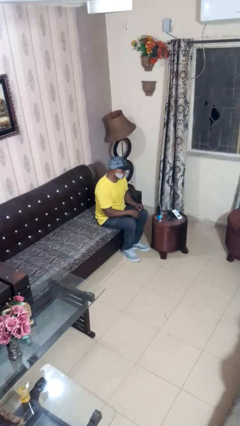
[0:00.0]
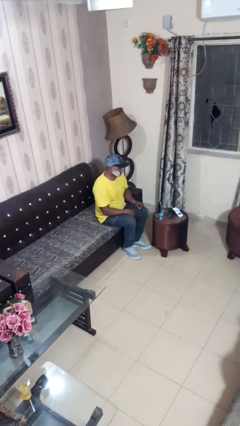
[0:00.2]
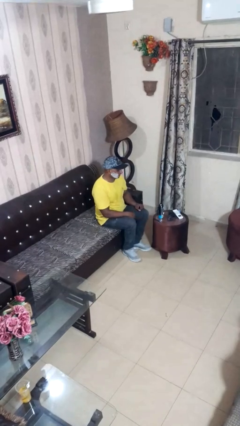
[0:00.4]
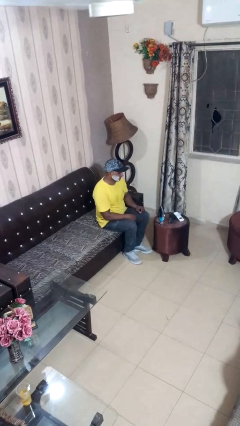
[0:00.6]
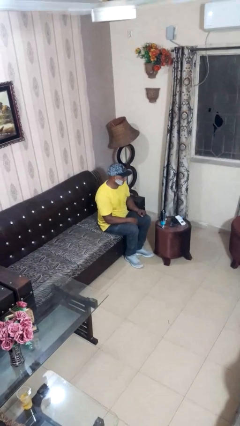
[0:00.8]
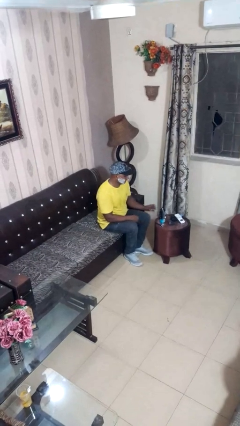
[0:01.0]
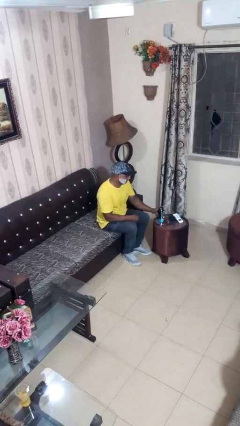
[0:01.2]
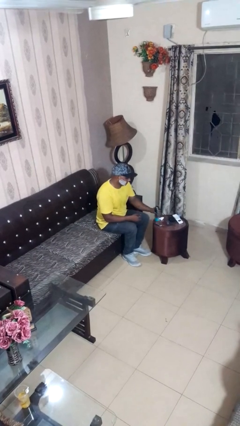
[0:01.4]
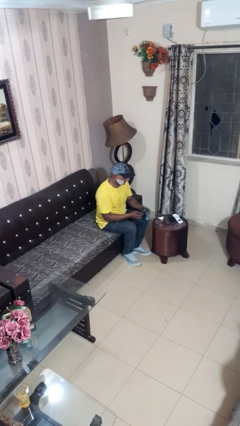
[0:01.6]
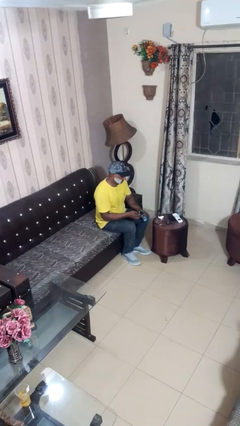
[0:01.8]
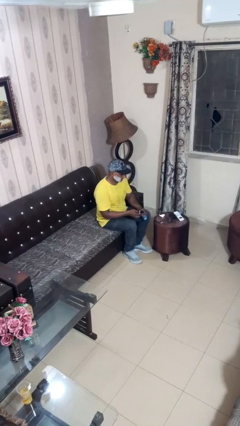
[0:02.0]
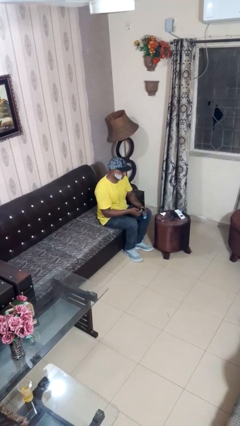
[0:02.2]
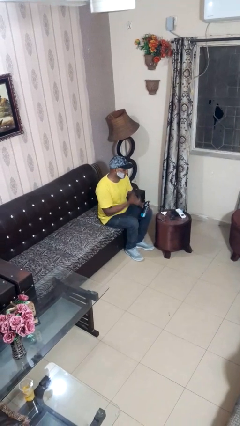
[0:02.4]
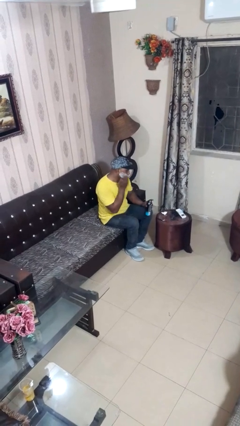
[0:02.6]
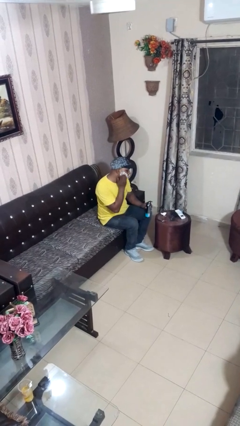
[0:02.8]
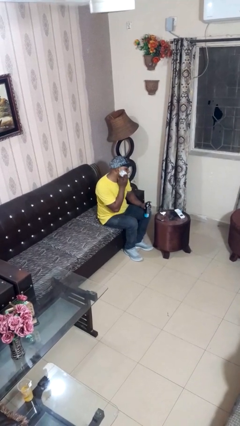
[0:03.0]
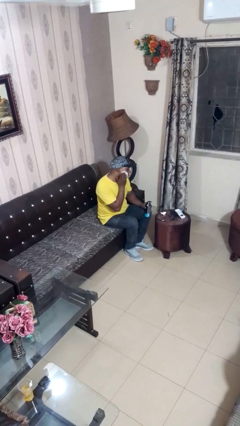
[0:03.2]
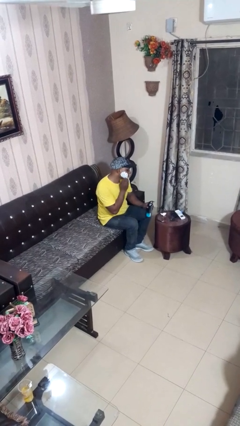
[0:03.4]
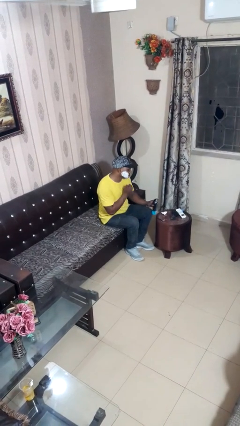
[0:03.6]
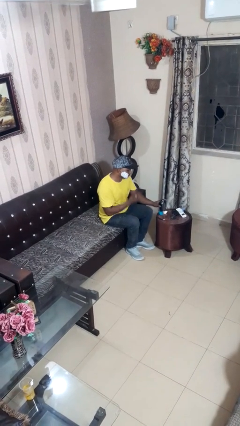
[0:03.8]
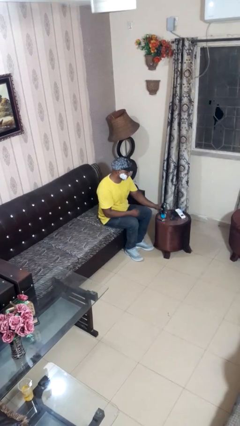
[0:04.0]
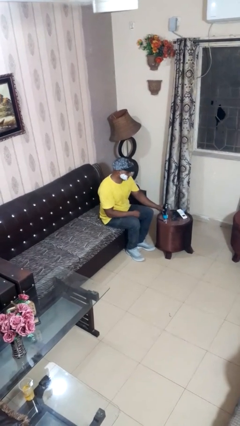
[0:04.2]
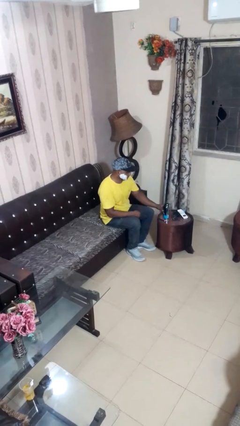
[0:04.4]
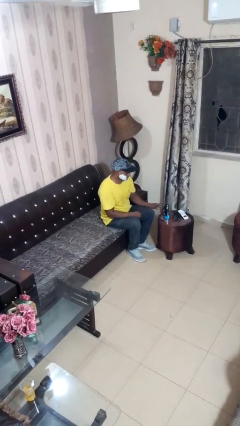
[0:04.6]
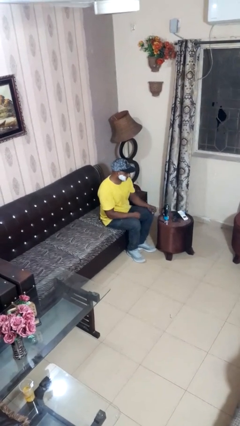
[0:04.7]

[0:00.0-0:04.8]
person applies shaving cream

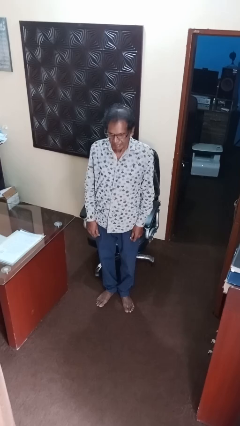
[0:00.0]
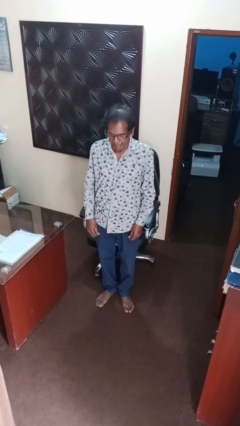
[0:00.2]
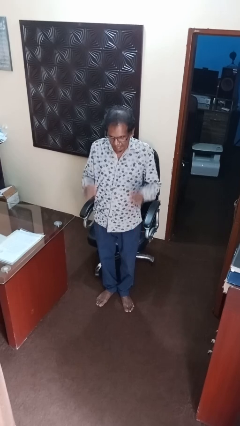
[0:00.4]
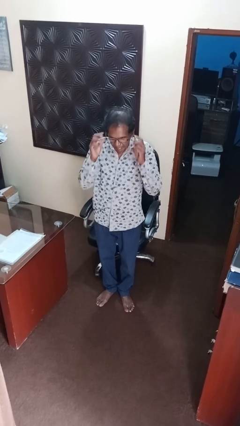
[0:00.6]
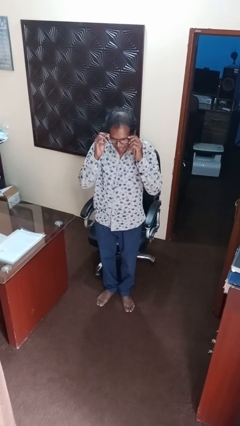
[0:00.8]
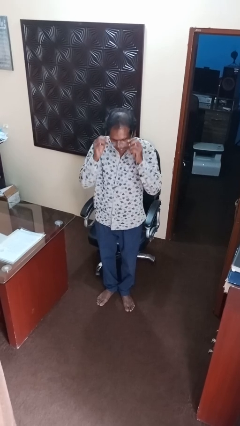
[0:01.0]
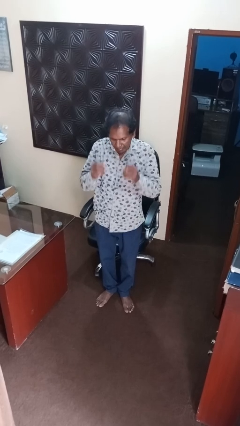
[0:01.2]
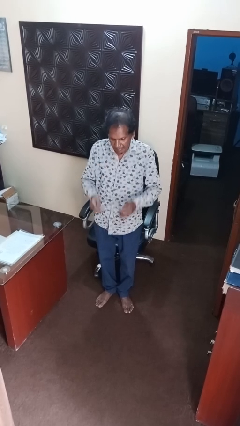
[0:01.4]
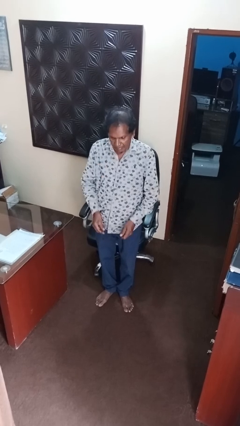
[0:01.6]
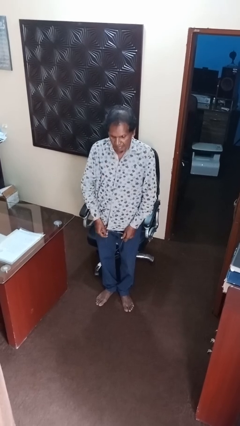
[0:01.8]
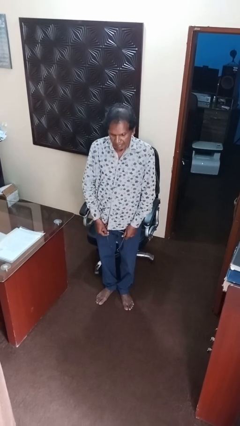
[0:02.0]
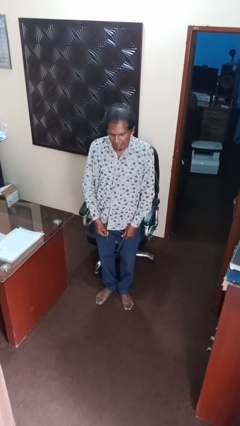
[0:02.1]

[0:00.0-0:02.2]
person takes off glasses

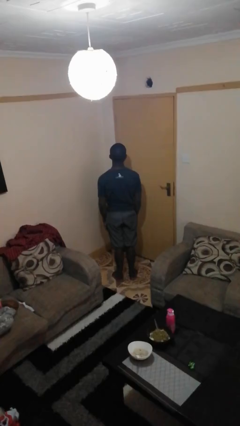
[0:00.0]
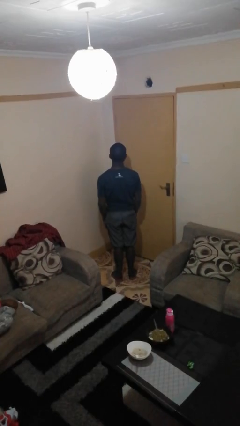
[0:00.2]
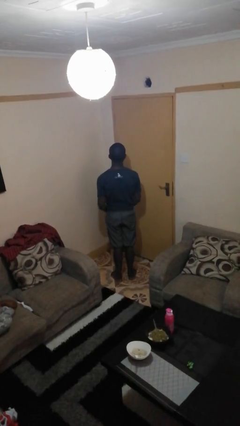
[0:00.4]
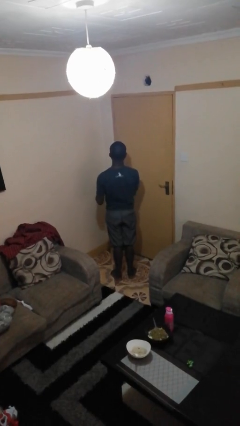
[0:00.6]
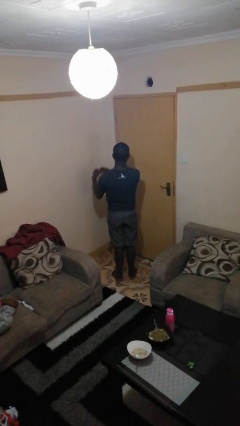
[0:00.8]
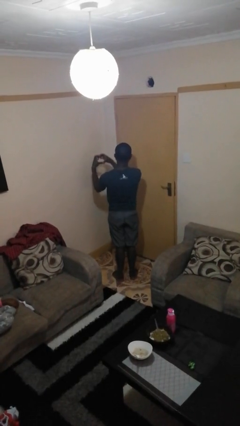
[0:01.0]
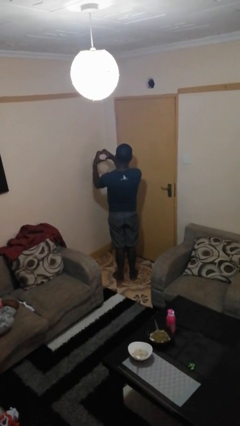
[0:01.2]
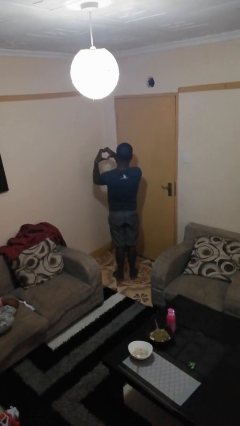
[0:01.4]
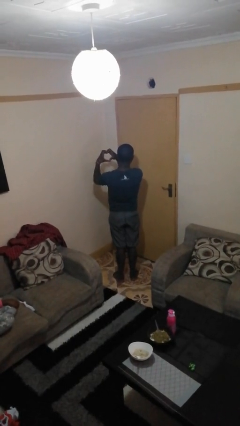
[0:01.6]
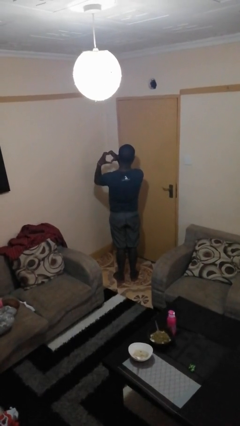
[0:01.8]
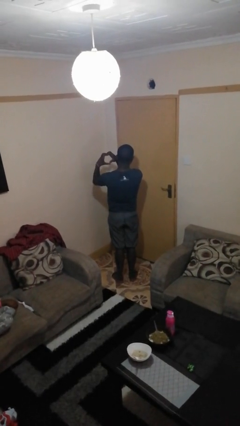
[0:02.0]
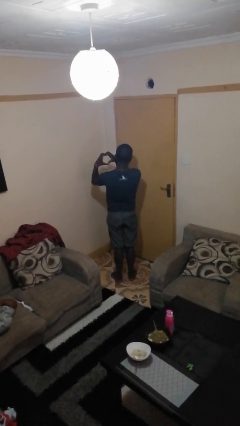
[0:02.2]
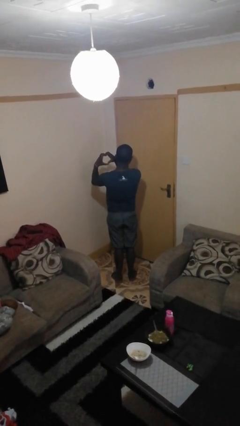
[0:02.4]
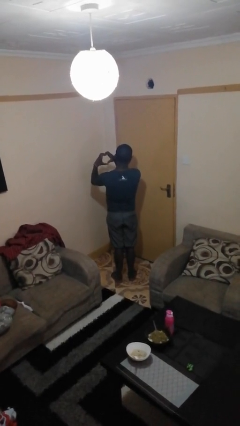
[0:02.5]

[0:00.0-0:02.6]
person gestures heart

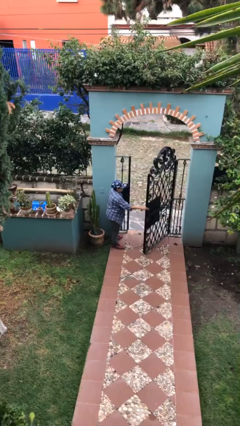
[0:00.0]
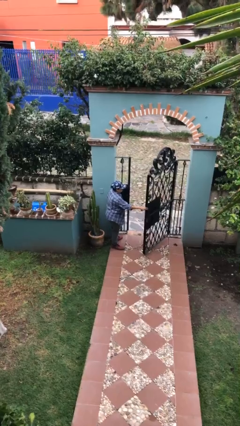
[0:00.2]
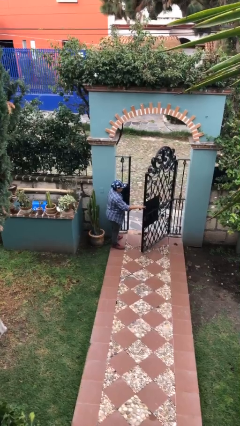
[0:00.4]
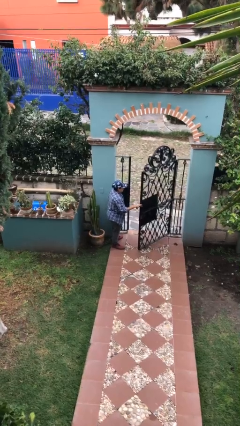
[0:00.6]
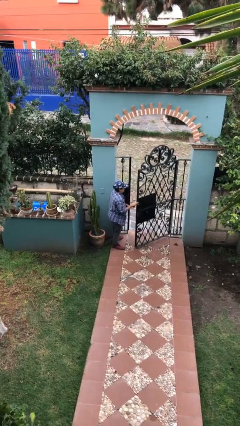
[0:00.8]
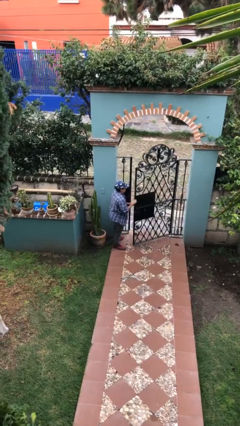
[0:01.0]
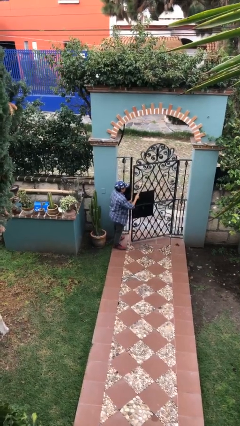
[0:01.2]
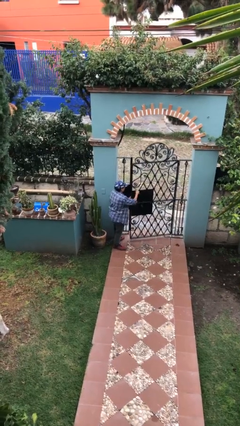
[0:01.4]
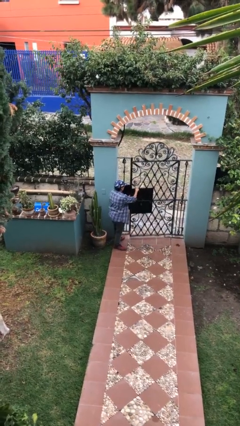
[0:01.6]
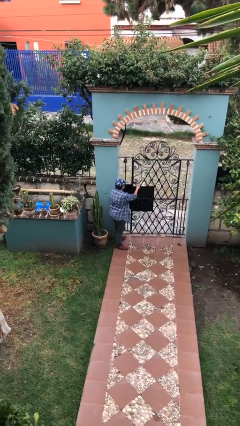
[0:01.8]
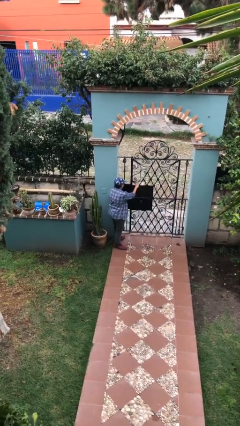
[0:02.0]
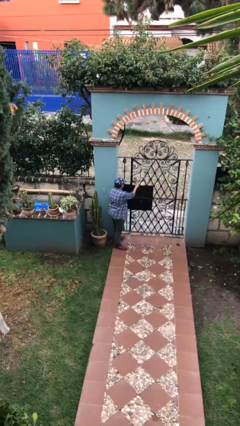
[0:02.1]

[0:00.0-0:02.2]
person closes facility door

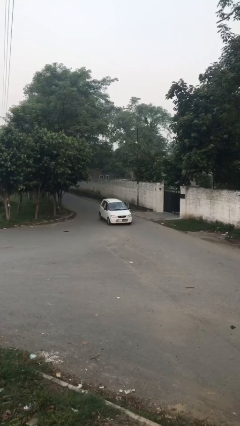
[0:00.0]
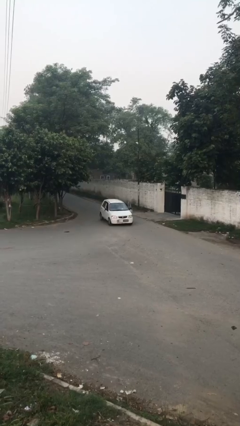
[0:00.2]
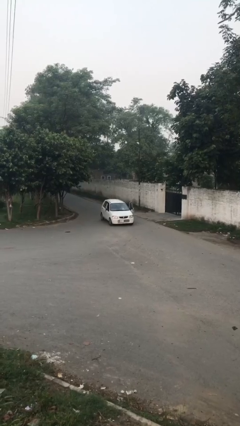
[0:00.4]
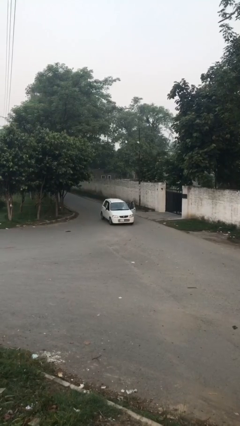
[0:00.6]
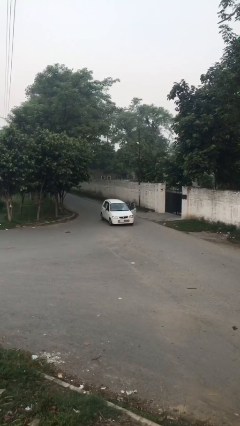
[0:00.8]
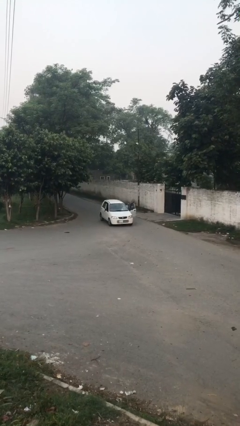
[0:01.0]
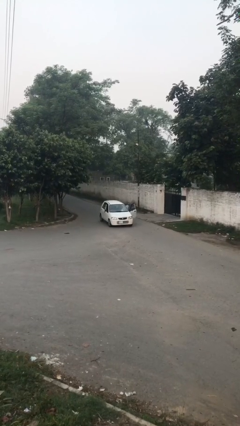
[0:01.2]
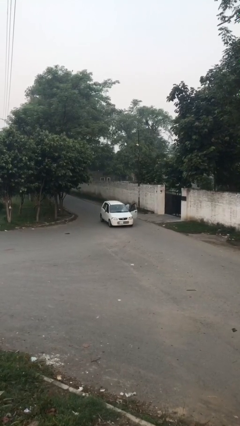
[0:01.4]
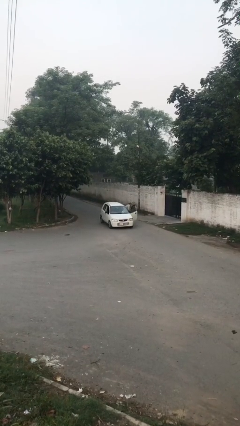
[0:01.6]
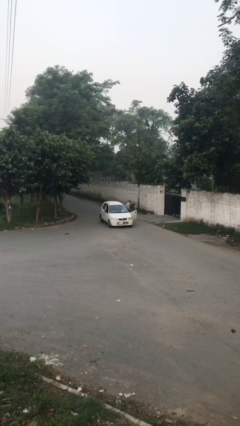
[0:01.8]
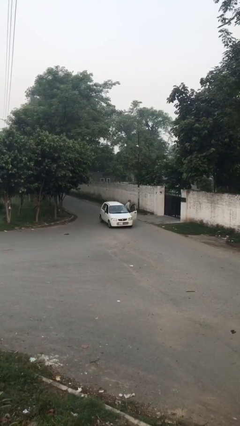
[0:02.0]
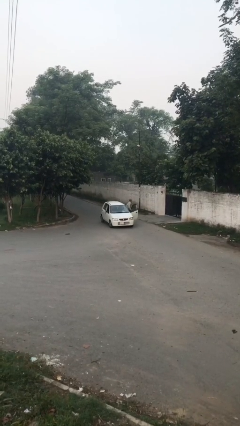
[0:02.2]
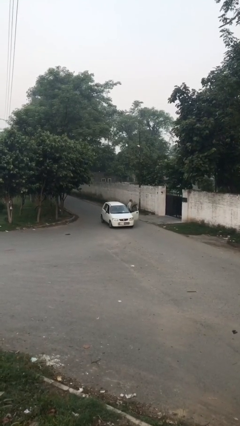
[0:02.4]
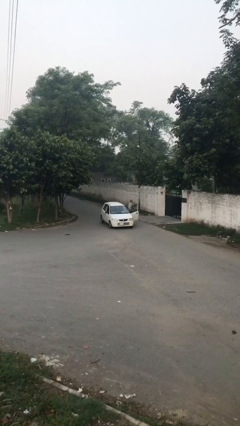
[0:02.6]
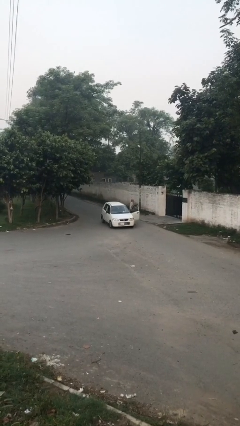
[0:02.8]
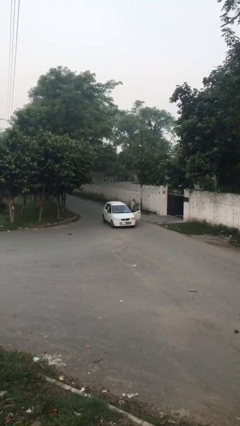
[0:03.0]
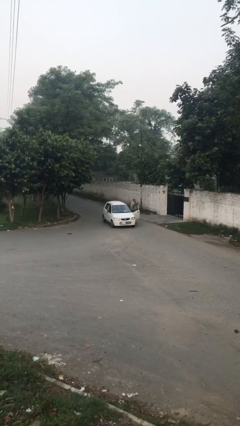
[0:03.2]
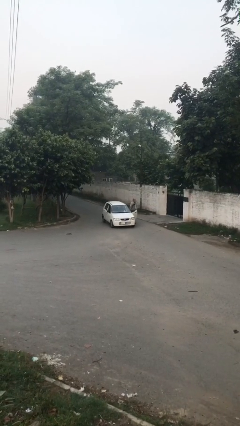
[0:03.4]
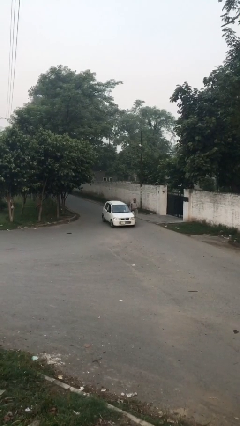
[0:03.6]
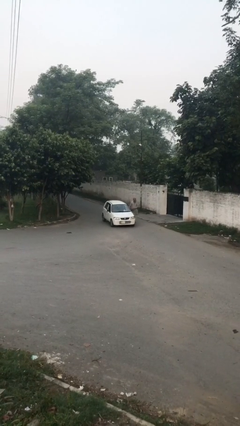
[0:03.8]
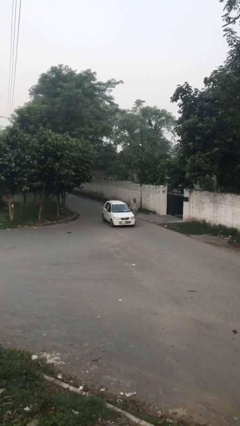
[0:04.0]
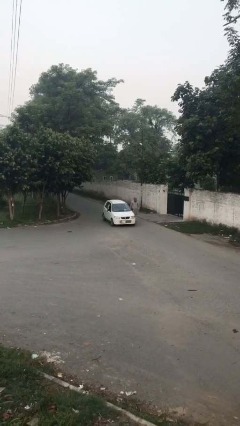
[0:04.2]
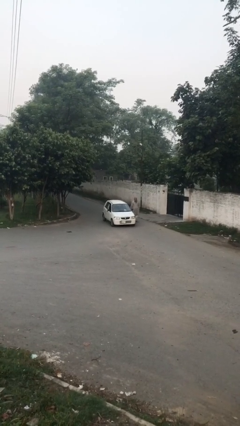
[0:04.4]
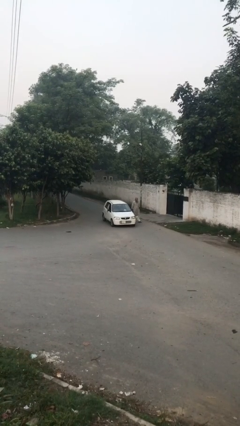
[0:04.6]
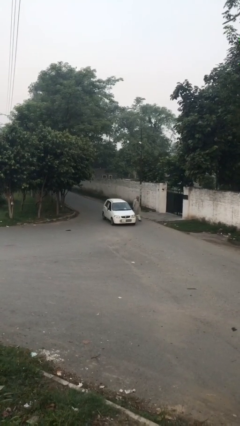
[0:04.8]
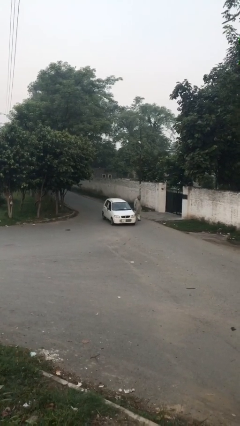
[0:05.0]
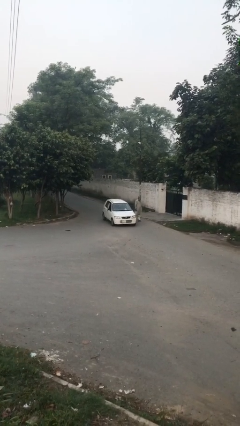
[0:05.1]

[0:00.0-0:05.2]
car drops off person

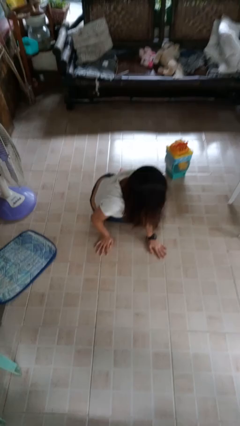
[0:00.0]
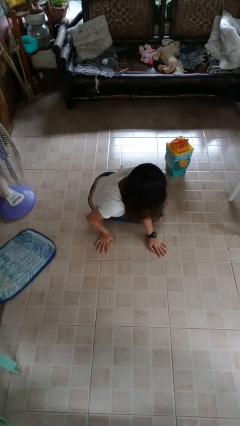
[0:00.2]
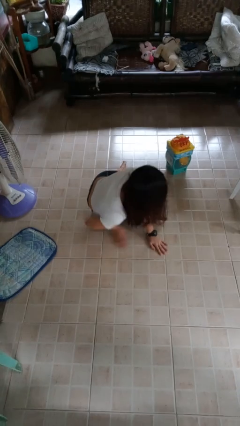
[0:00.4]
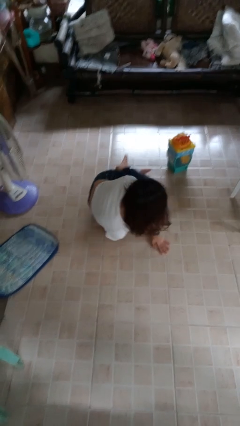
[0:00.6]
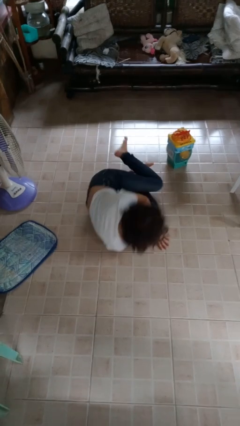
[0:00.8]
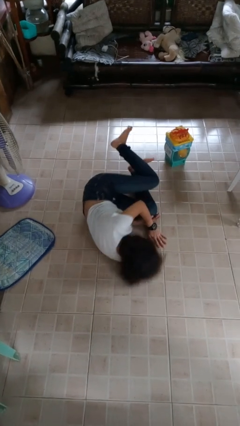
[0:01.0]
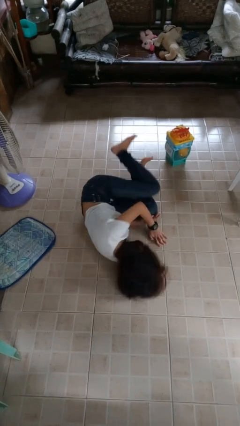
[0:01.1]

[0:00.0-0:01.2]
person lies down on floor
